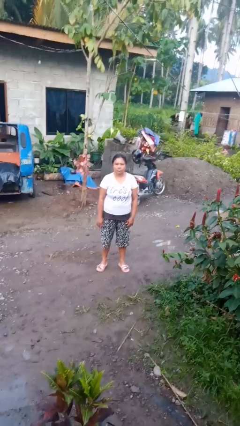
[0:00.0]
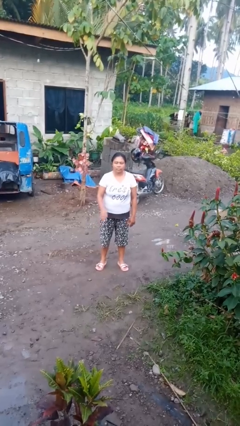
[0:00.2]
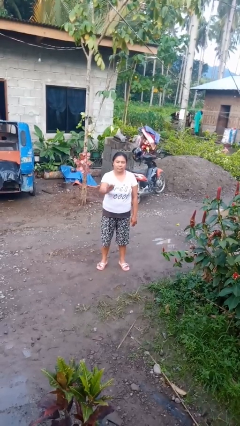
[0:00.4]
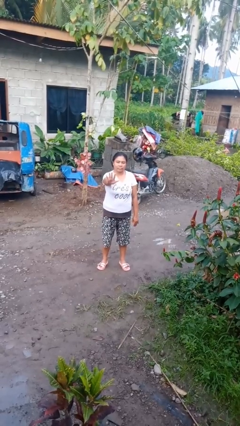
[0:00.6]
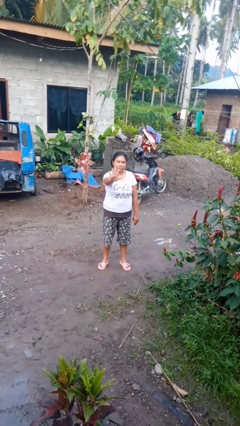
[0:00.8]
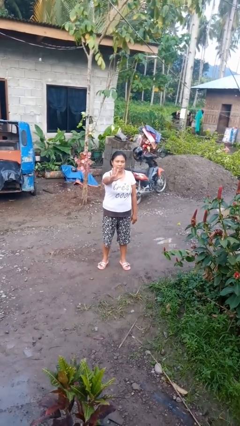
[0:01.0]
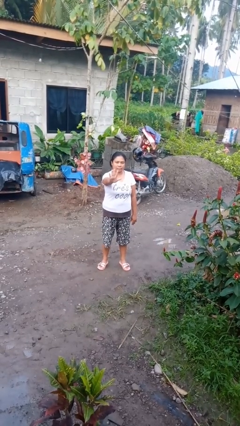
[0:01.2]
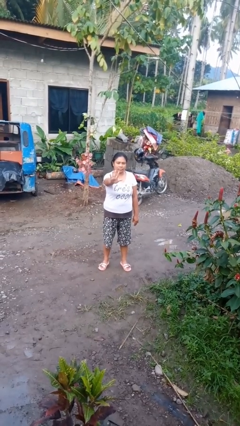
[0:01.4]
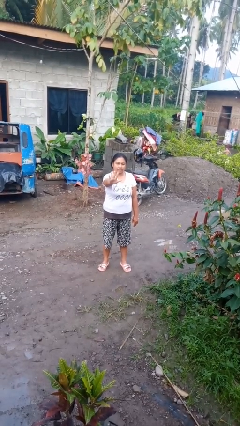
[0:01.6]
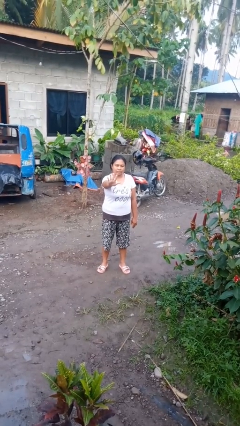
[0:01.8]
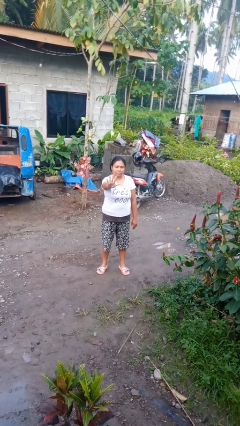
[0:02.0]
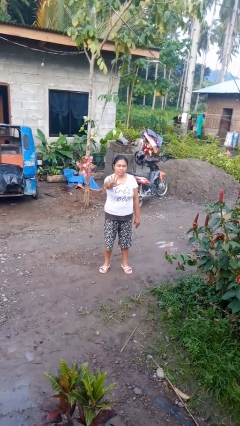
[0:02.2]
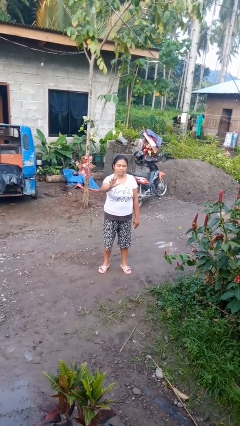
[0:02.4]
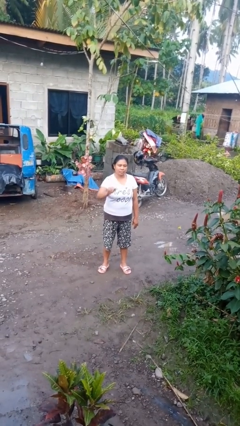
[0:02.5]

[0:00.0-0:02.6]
person gestures number five

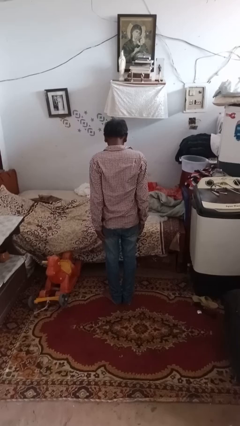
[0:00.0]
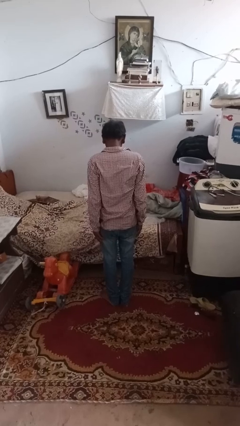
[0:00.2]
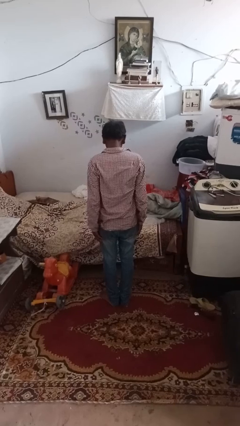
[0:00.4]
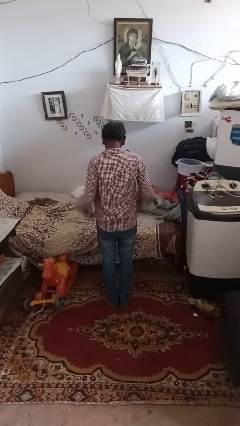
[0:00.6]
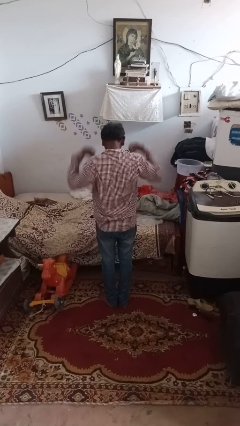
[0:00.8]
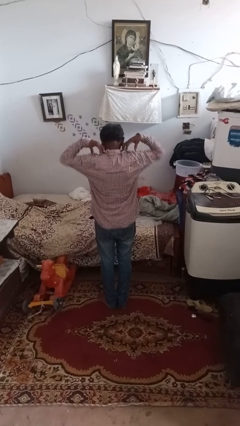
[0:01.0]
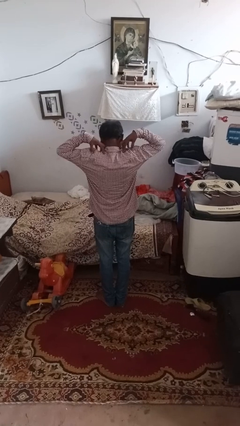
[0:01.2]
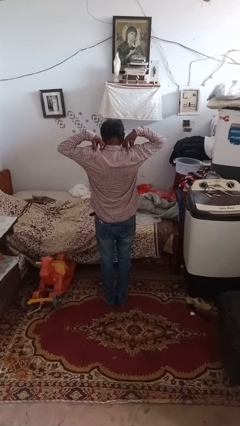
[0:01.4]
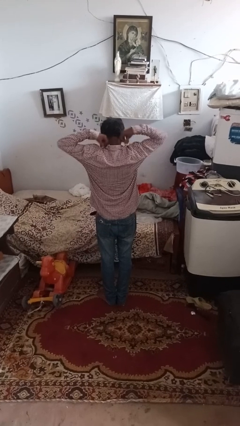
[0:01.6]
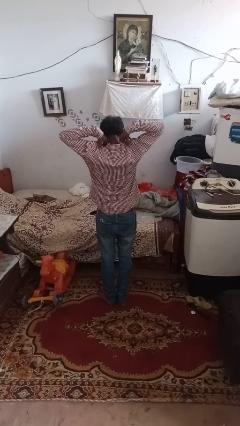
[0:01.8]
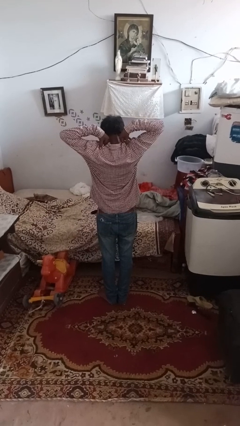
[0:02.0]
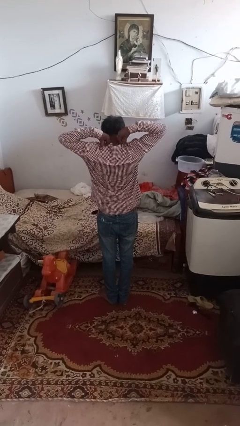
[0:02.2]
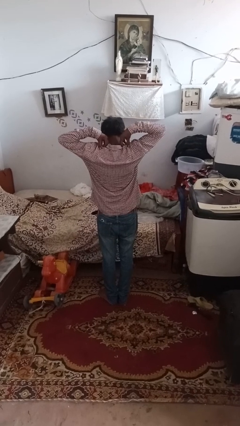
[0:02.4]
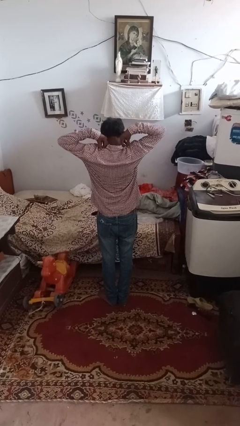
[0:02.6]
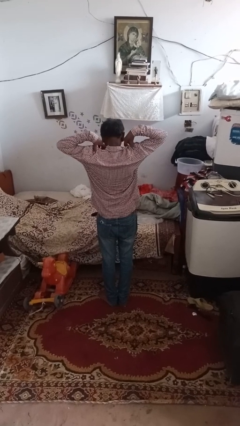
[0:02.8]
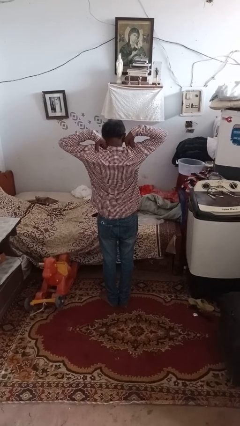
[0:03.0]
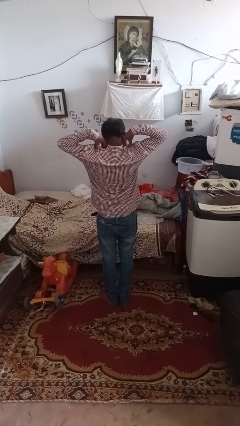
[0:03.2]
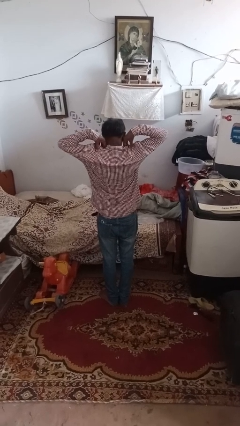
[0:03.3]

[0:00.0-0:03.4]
person sneezes into arm

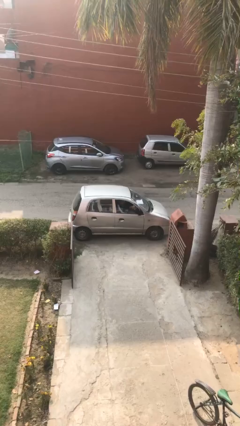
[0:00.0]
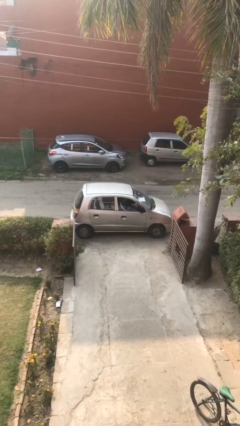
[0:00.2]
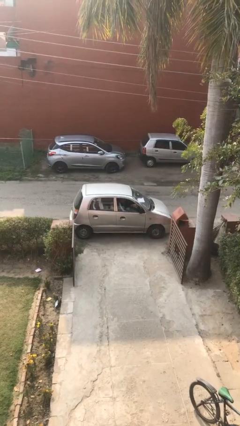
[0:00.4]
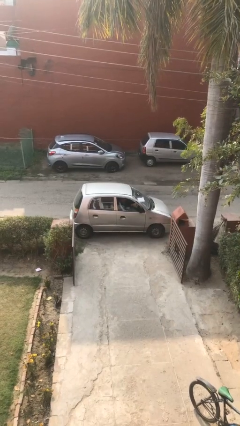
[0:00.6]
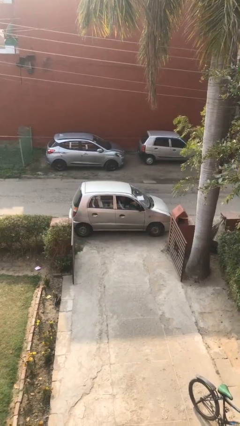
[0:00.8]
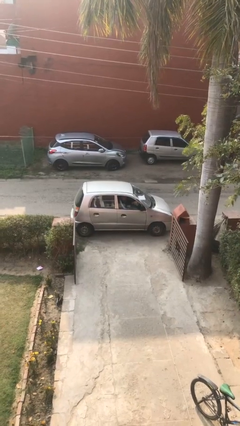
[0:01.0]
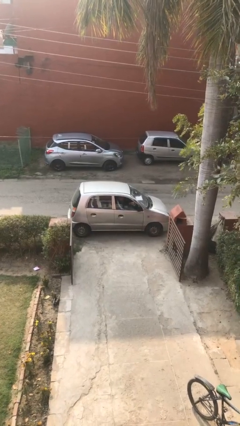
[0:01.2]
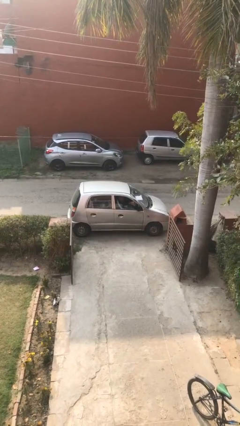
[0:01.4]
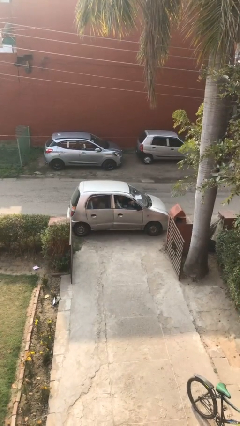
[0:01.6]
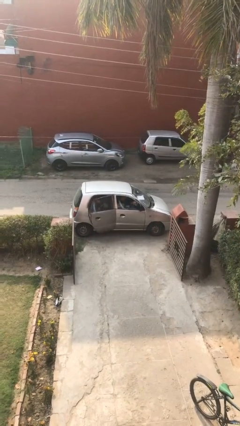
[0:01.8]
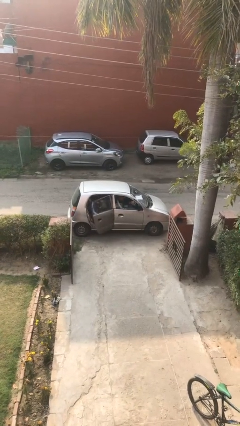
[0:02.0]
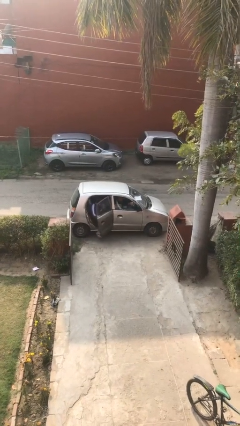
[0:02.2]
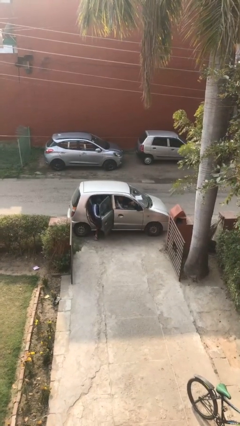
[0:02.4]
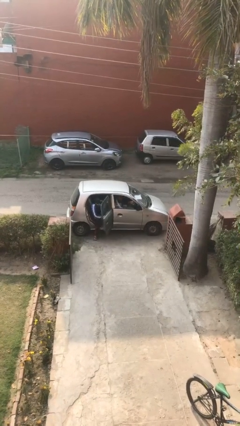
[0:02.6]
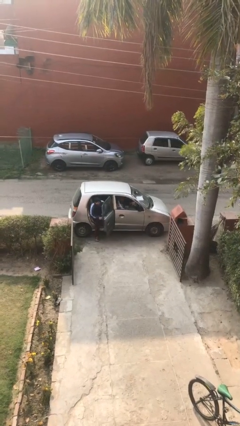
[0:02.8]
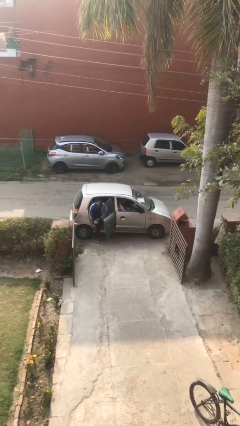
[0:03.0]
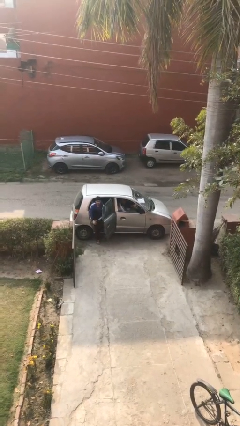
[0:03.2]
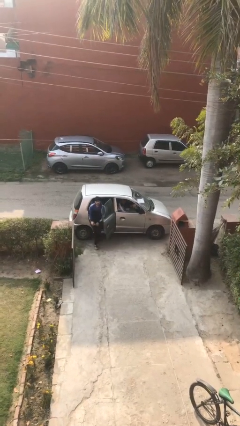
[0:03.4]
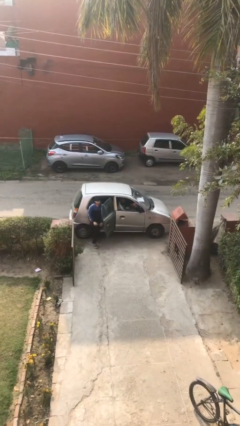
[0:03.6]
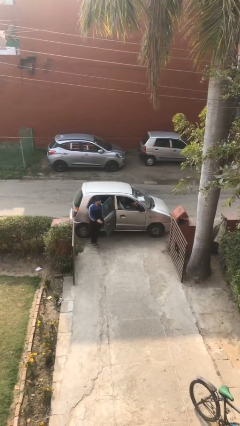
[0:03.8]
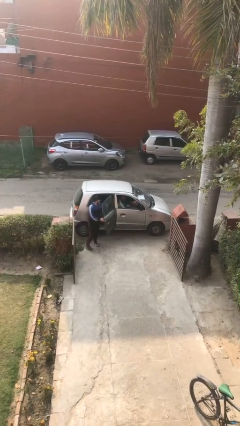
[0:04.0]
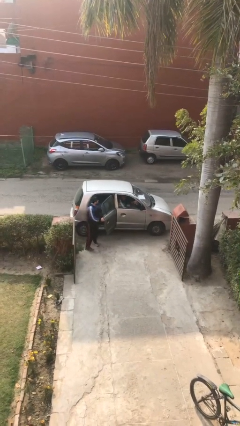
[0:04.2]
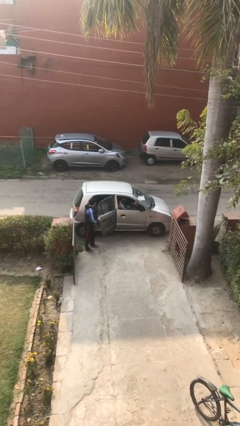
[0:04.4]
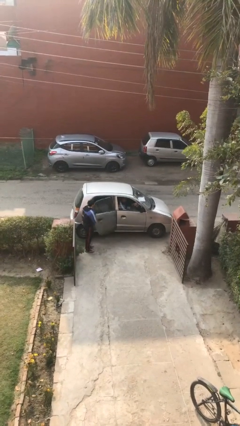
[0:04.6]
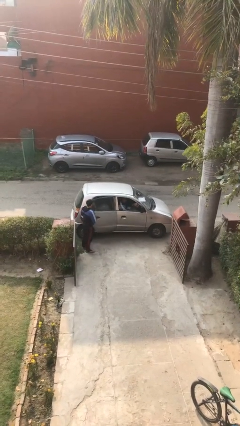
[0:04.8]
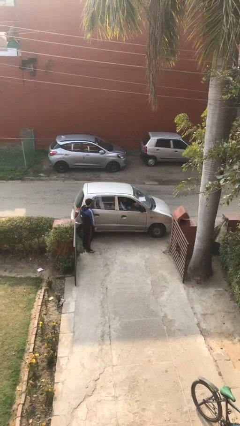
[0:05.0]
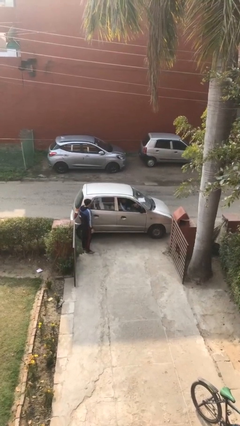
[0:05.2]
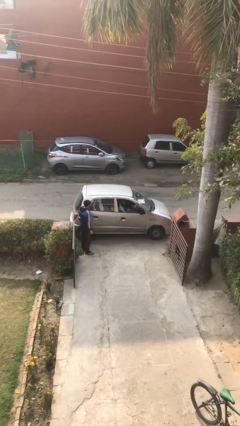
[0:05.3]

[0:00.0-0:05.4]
car drops off person

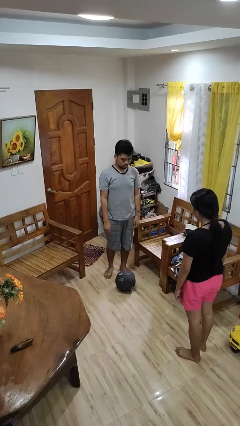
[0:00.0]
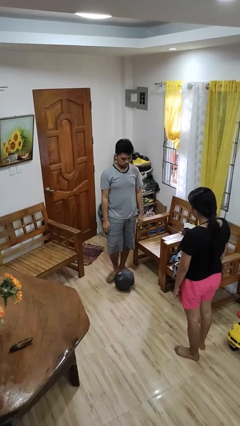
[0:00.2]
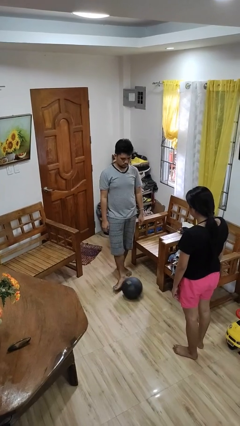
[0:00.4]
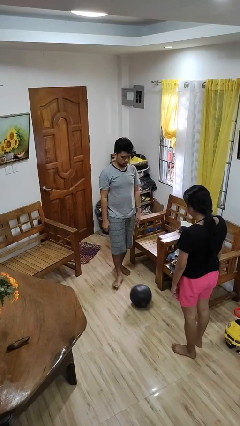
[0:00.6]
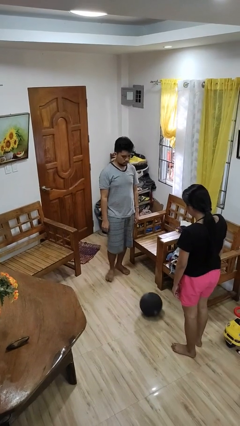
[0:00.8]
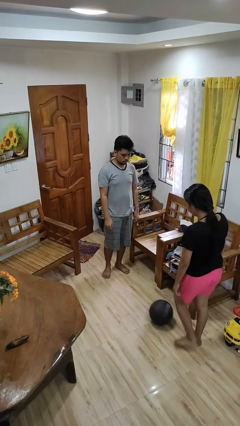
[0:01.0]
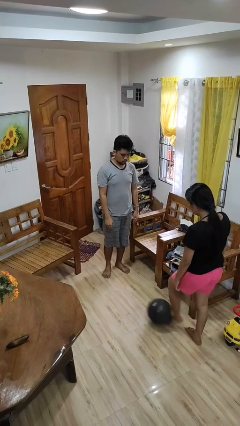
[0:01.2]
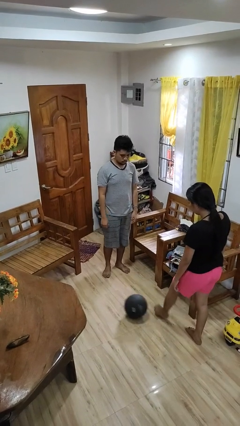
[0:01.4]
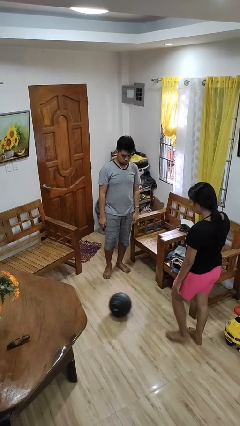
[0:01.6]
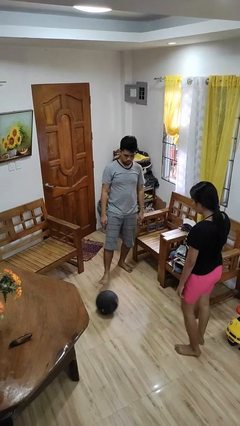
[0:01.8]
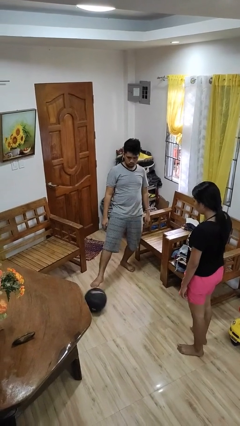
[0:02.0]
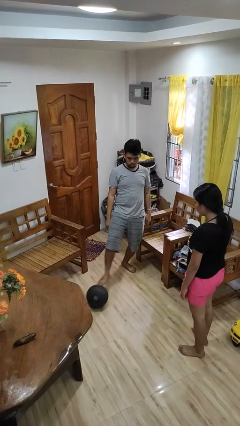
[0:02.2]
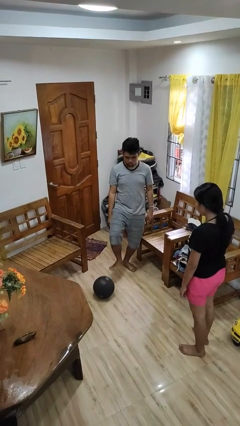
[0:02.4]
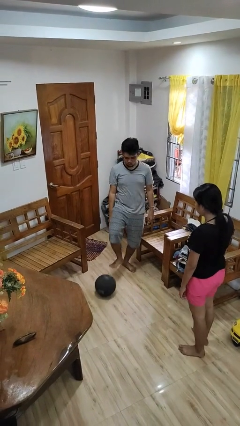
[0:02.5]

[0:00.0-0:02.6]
person kicks object to person

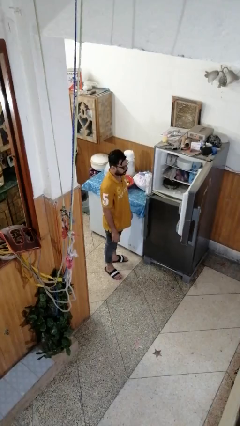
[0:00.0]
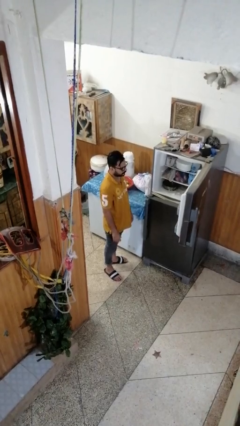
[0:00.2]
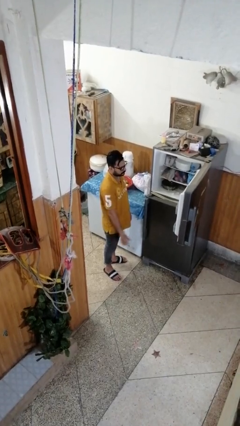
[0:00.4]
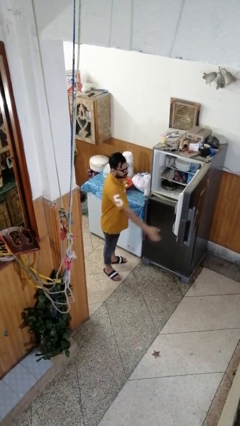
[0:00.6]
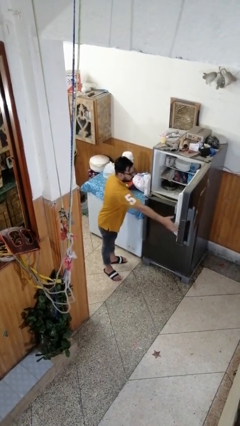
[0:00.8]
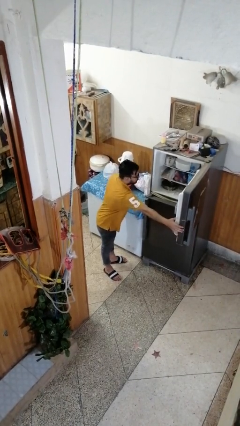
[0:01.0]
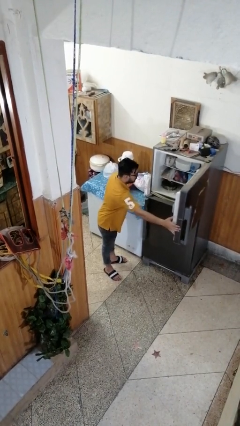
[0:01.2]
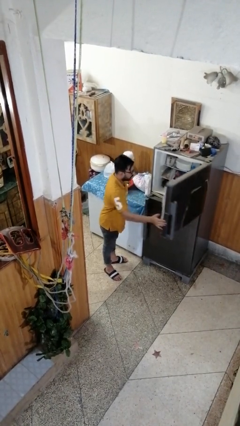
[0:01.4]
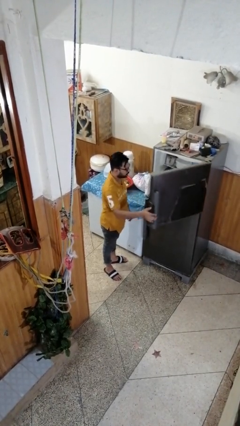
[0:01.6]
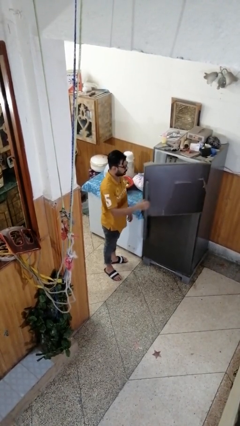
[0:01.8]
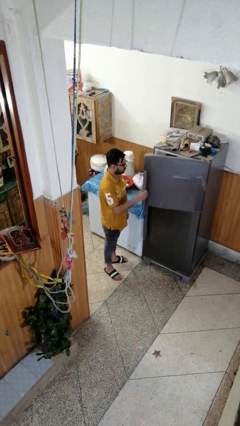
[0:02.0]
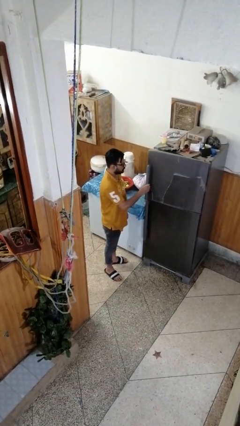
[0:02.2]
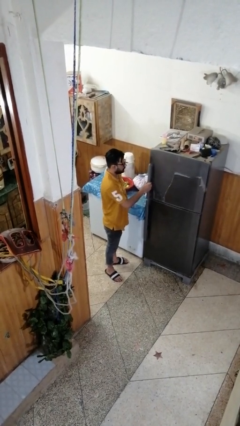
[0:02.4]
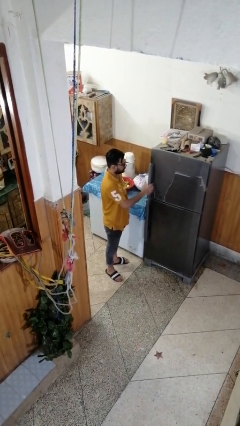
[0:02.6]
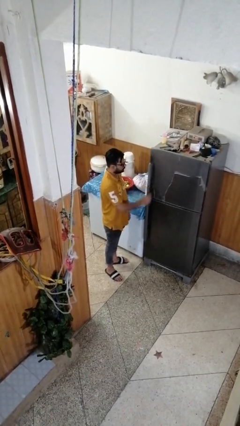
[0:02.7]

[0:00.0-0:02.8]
person closes refrigerator

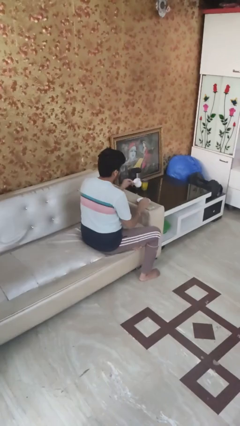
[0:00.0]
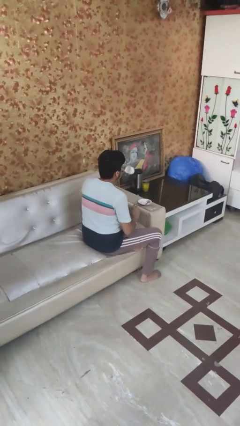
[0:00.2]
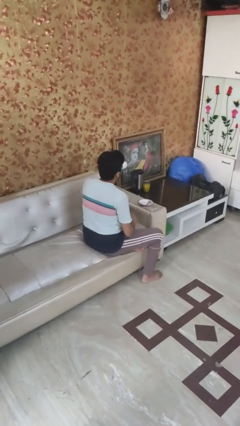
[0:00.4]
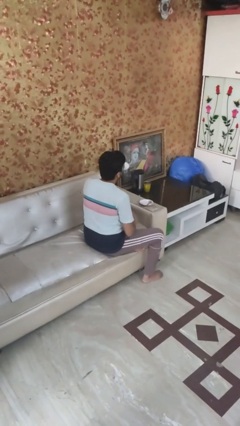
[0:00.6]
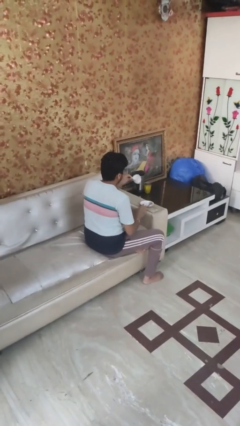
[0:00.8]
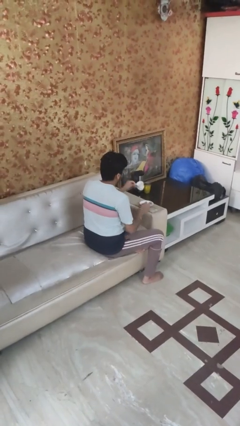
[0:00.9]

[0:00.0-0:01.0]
person drinks from mug
